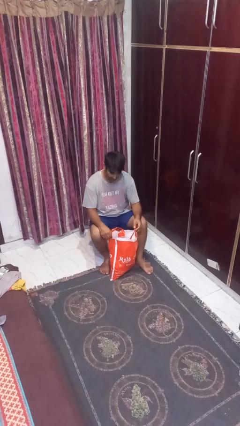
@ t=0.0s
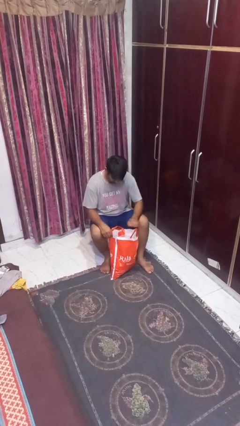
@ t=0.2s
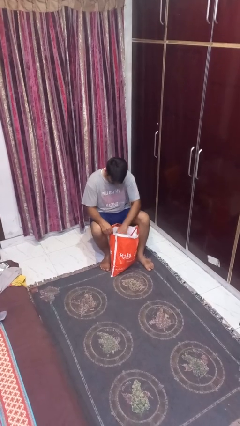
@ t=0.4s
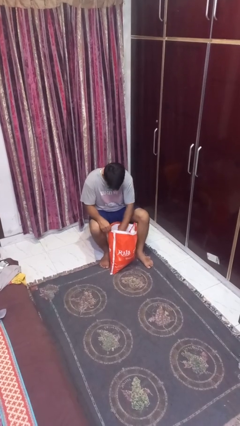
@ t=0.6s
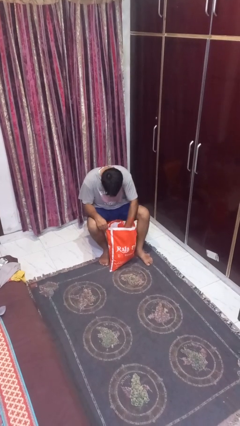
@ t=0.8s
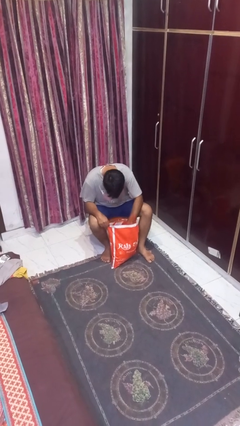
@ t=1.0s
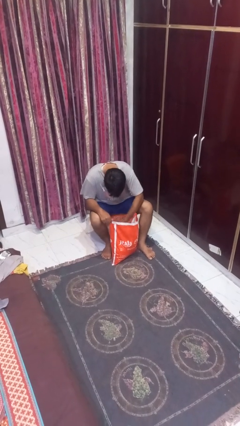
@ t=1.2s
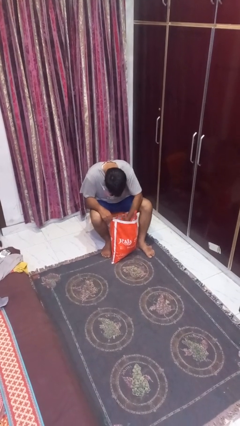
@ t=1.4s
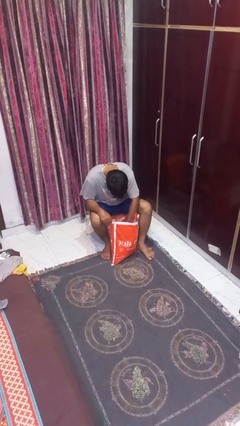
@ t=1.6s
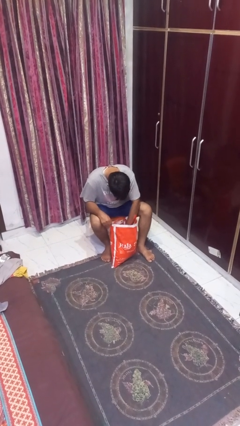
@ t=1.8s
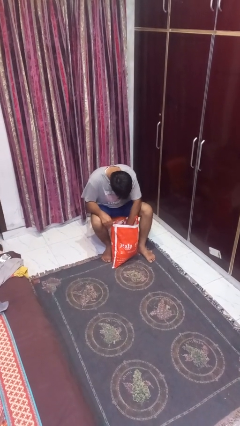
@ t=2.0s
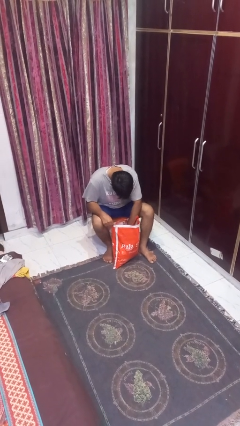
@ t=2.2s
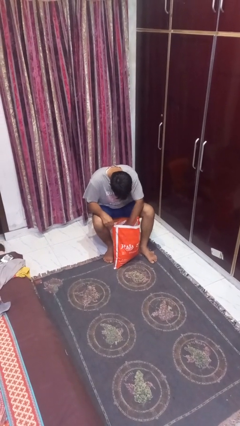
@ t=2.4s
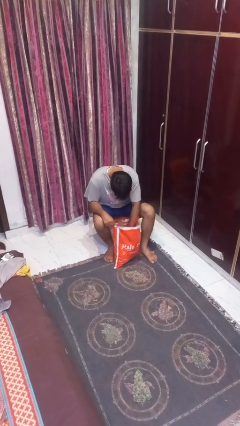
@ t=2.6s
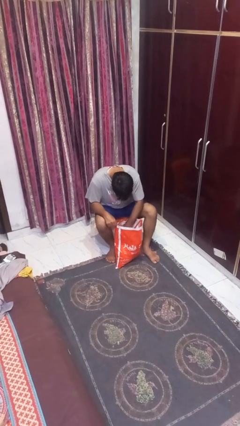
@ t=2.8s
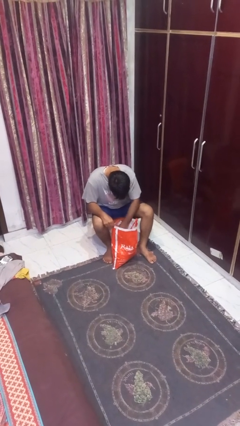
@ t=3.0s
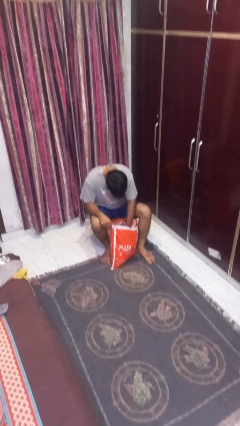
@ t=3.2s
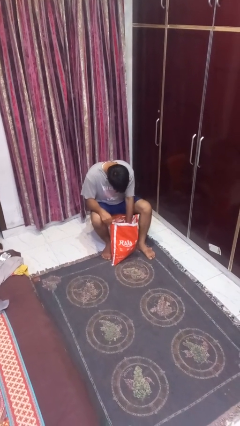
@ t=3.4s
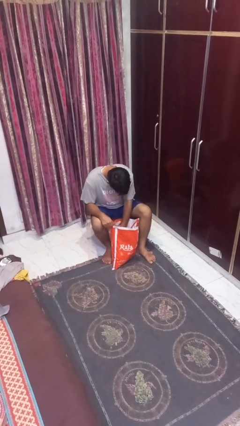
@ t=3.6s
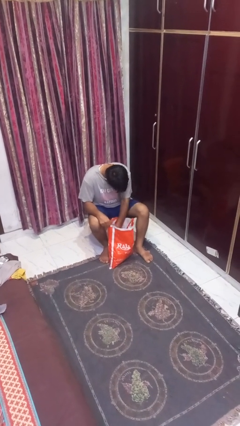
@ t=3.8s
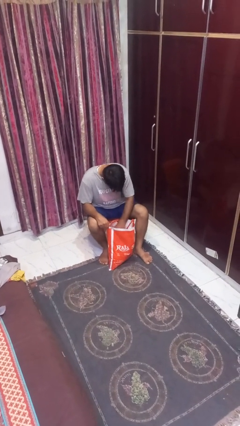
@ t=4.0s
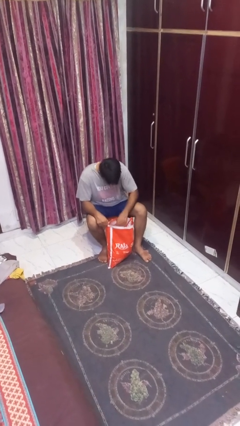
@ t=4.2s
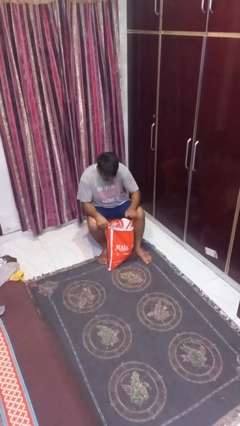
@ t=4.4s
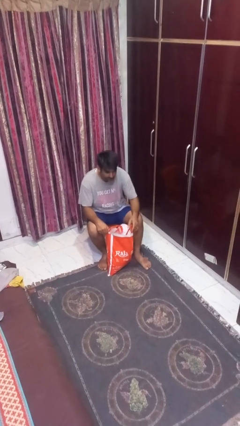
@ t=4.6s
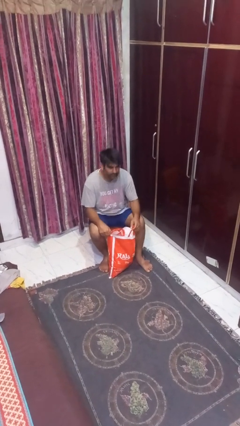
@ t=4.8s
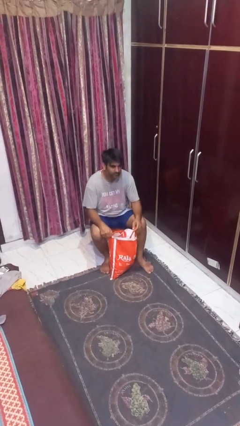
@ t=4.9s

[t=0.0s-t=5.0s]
person searches in bag

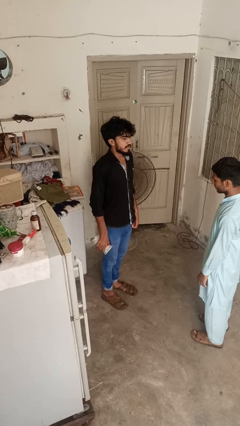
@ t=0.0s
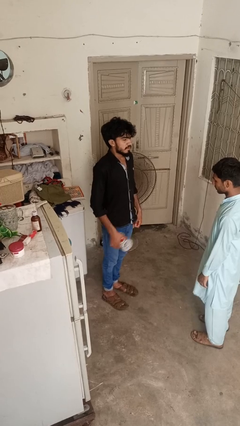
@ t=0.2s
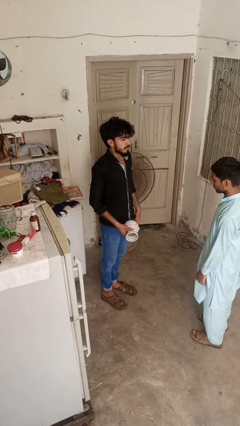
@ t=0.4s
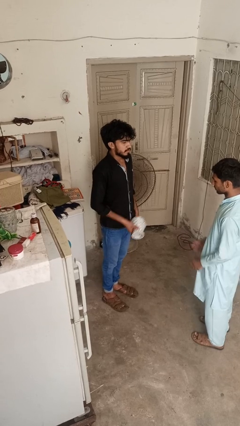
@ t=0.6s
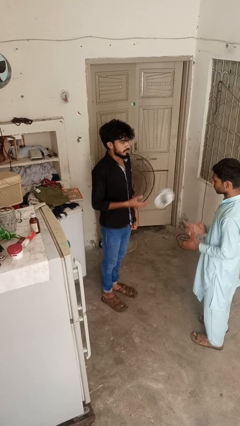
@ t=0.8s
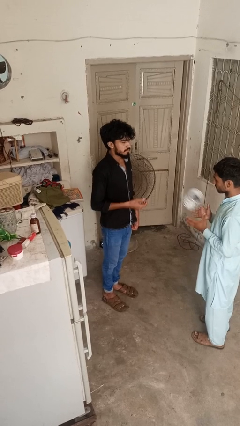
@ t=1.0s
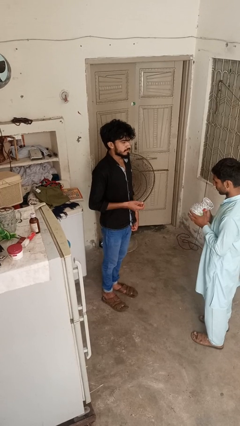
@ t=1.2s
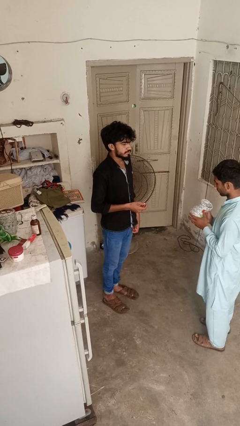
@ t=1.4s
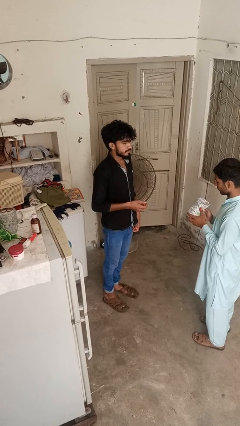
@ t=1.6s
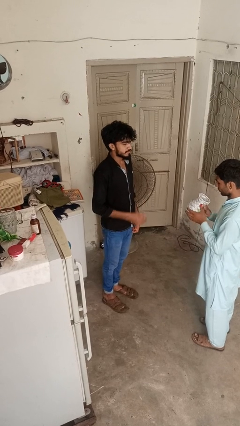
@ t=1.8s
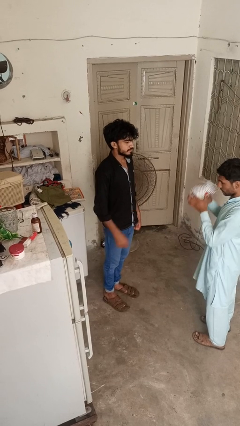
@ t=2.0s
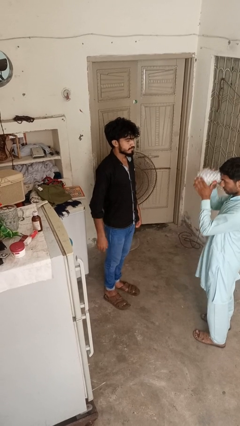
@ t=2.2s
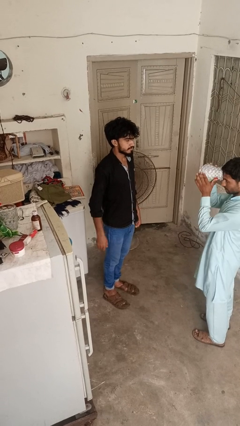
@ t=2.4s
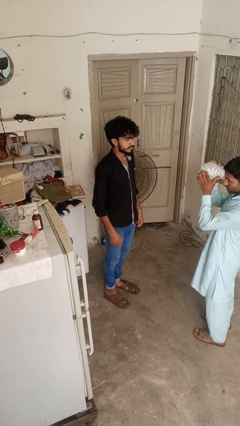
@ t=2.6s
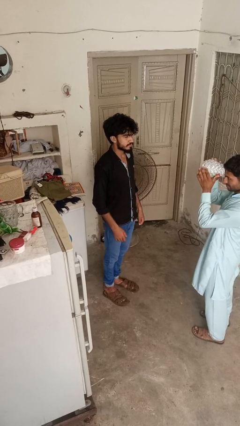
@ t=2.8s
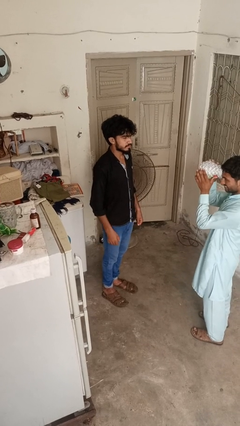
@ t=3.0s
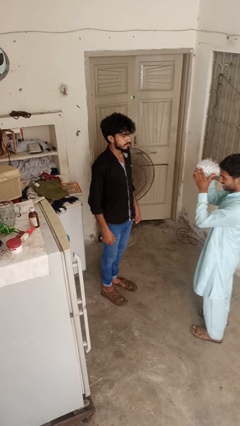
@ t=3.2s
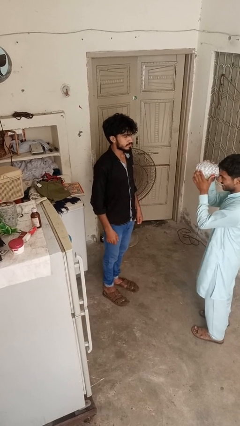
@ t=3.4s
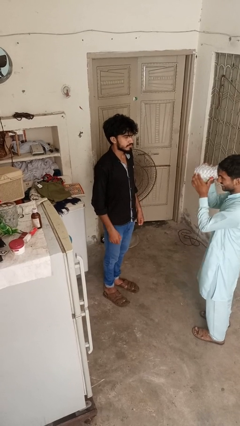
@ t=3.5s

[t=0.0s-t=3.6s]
person throws object to person

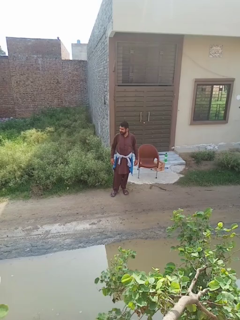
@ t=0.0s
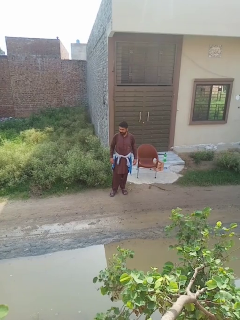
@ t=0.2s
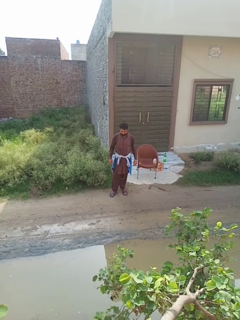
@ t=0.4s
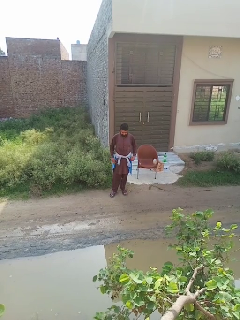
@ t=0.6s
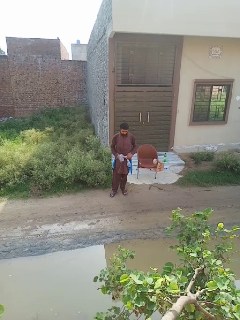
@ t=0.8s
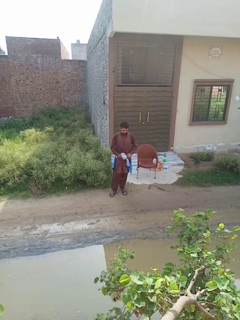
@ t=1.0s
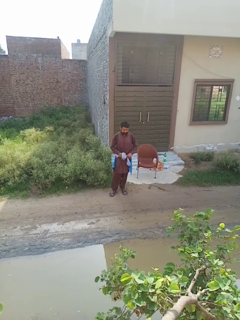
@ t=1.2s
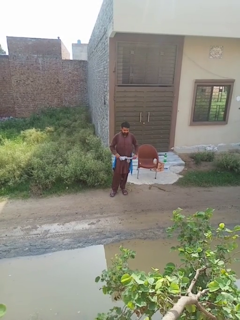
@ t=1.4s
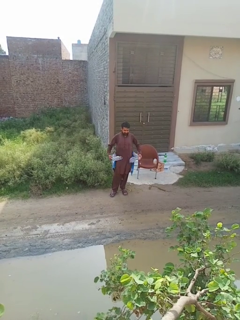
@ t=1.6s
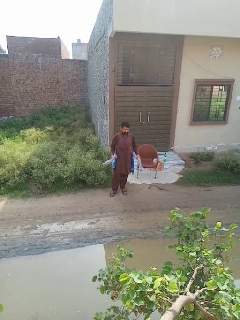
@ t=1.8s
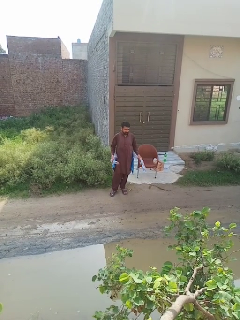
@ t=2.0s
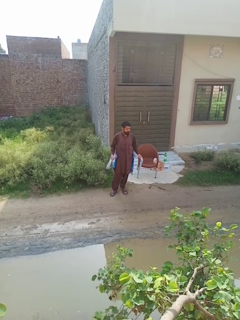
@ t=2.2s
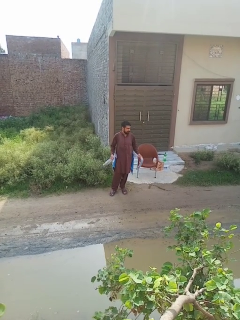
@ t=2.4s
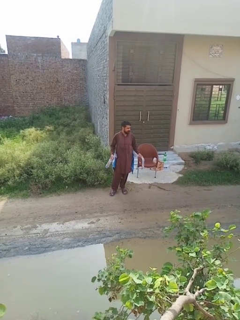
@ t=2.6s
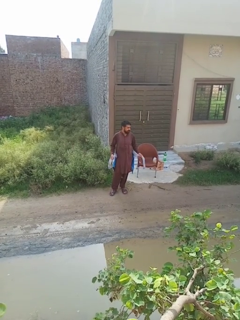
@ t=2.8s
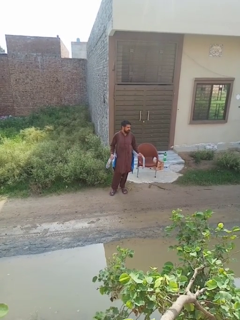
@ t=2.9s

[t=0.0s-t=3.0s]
person unties jacket around waist

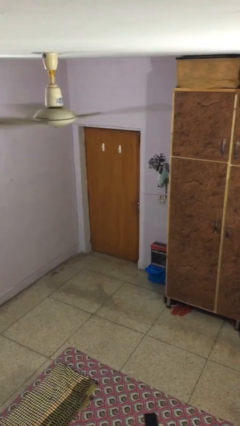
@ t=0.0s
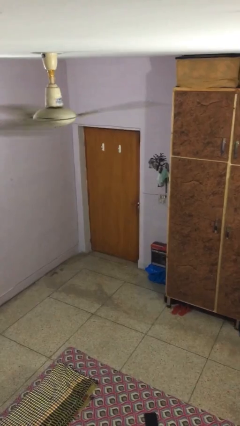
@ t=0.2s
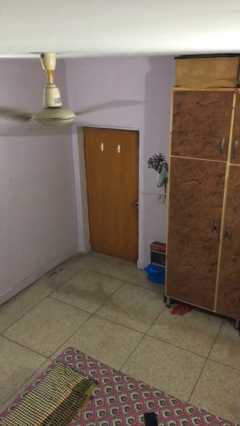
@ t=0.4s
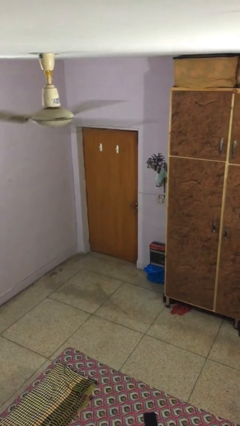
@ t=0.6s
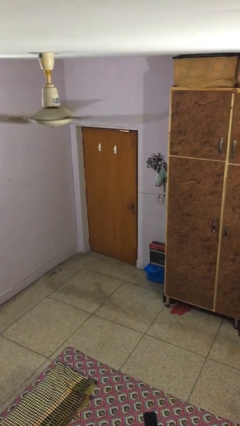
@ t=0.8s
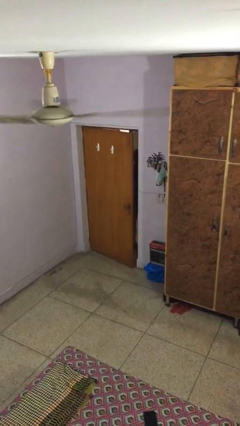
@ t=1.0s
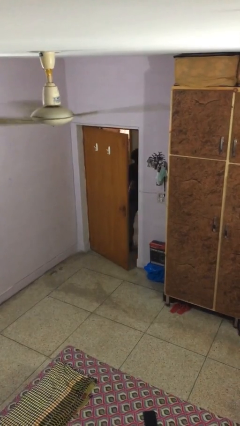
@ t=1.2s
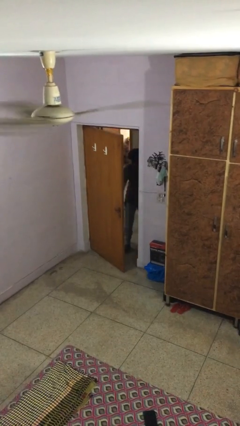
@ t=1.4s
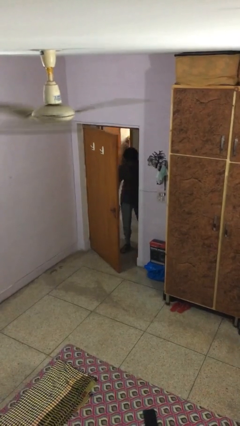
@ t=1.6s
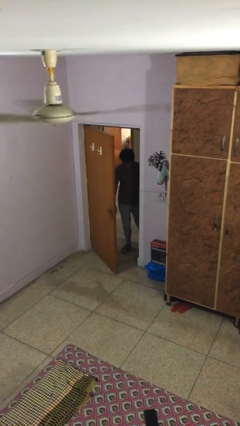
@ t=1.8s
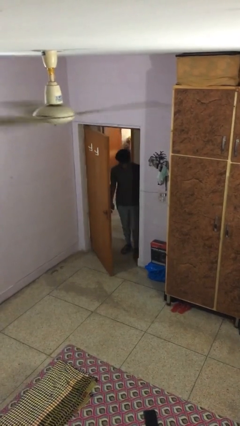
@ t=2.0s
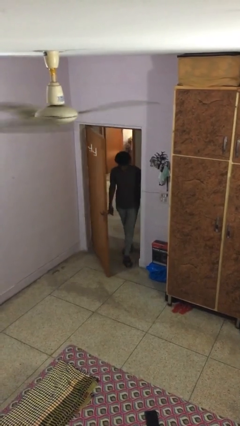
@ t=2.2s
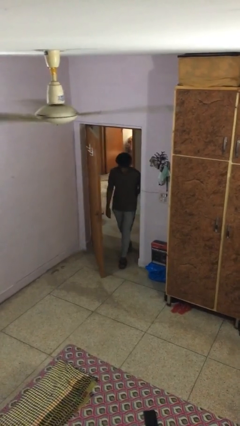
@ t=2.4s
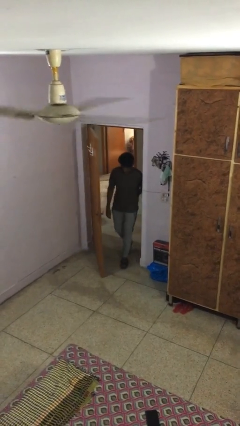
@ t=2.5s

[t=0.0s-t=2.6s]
person opens facility door

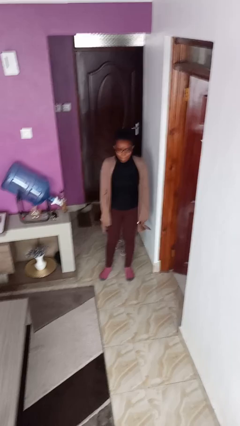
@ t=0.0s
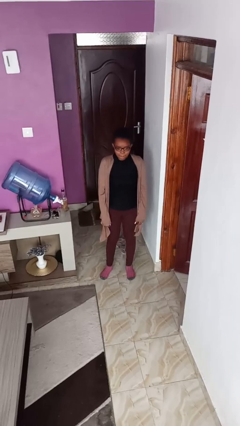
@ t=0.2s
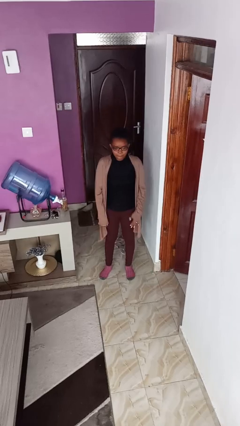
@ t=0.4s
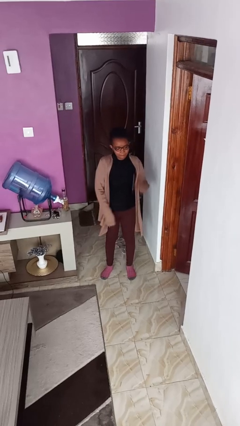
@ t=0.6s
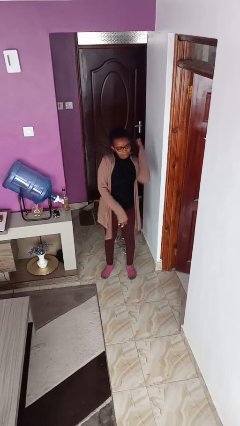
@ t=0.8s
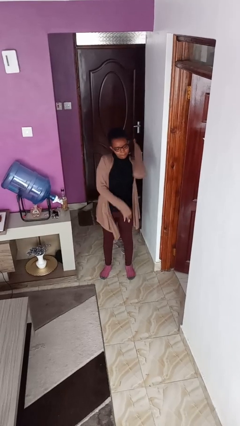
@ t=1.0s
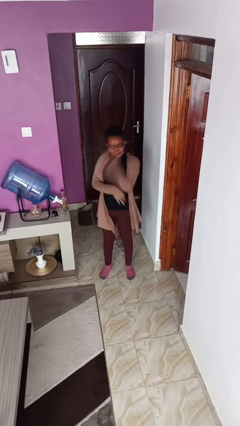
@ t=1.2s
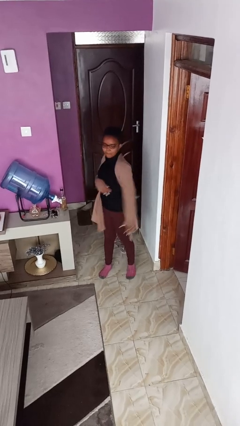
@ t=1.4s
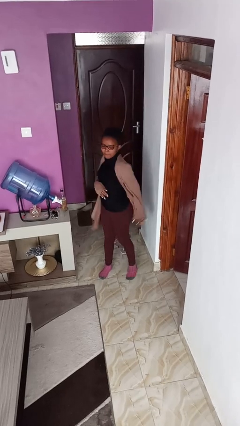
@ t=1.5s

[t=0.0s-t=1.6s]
person karate chop

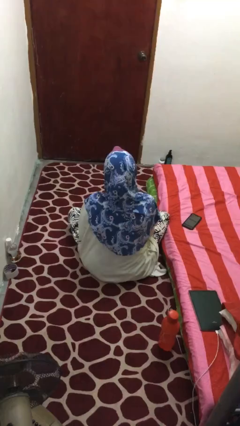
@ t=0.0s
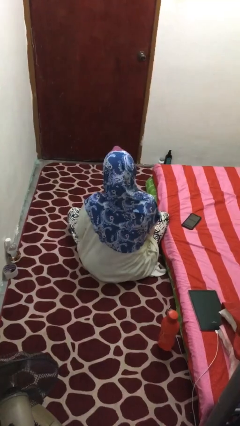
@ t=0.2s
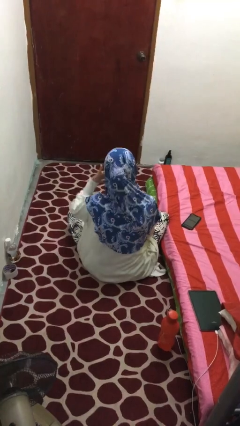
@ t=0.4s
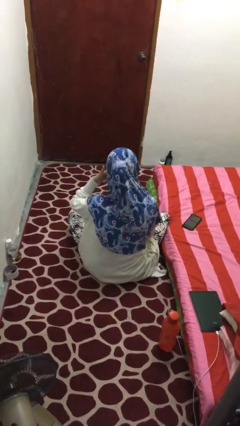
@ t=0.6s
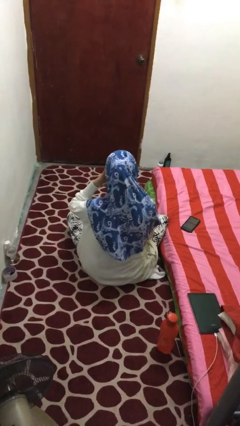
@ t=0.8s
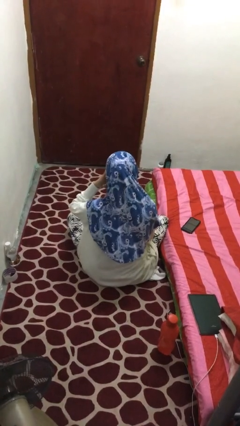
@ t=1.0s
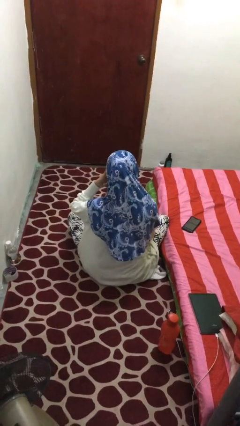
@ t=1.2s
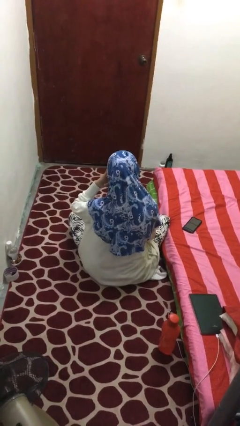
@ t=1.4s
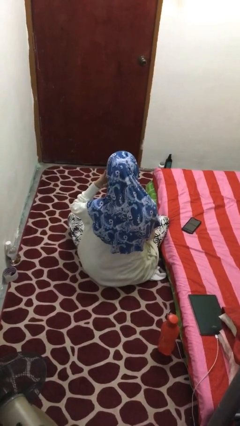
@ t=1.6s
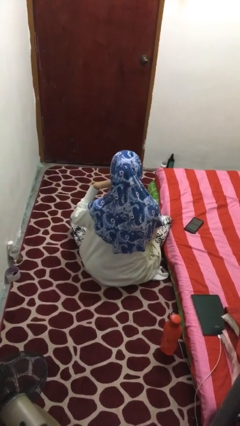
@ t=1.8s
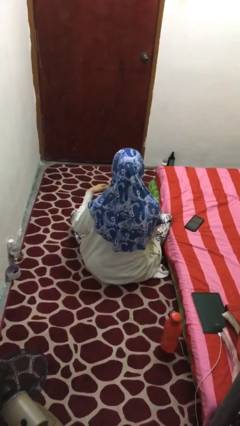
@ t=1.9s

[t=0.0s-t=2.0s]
person gestures call me

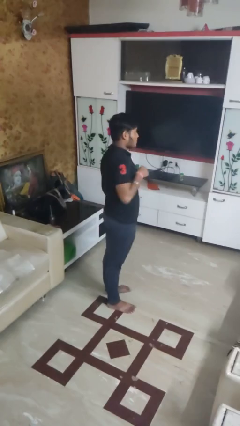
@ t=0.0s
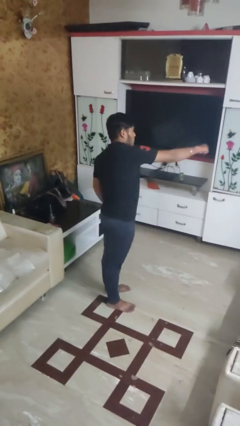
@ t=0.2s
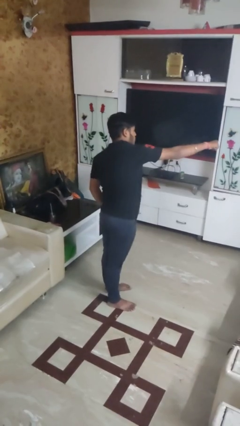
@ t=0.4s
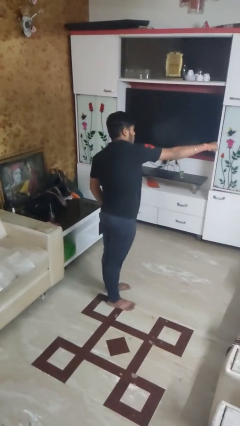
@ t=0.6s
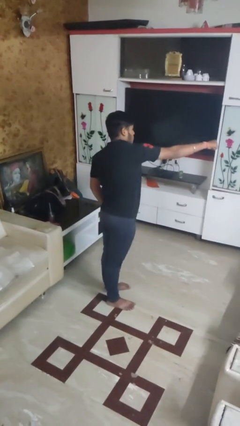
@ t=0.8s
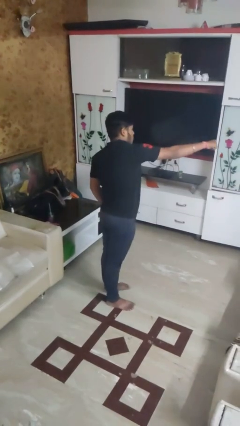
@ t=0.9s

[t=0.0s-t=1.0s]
person punches
